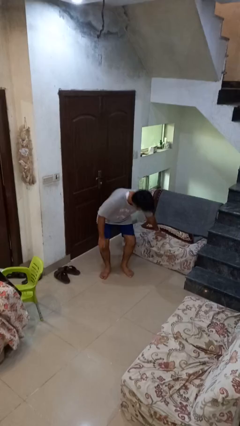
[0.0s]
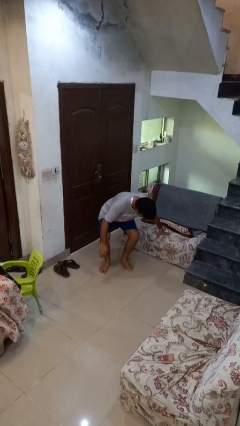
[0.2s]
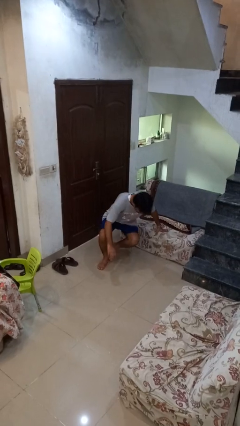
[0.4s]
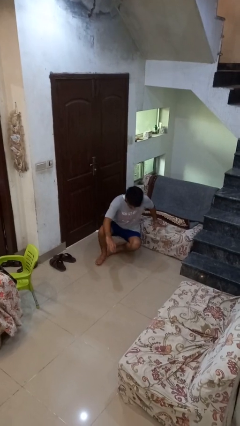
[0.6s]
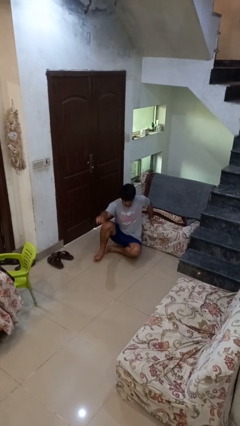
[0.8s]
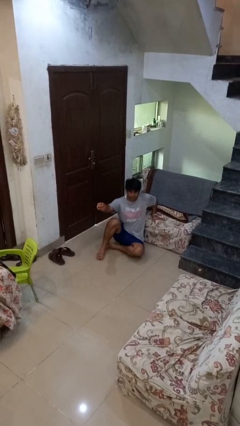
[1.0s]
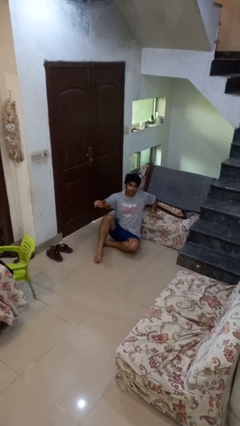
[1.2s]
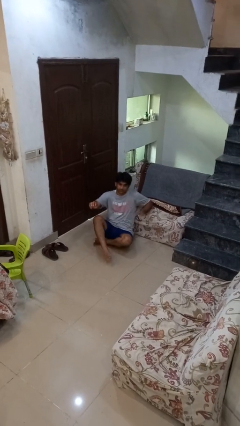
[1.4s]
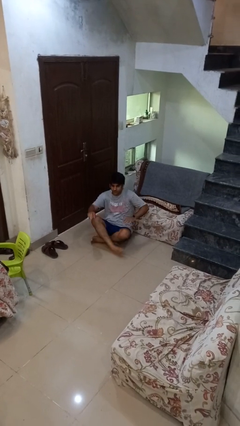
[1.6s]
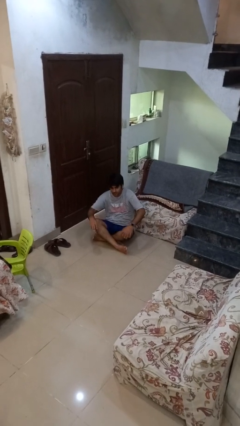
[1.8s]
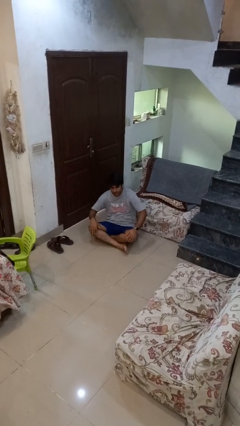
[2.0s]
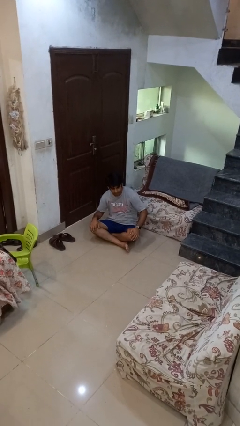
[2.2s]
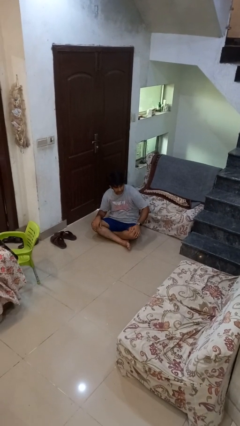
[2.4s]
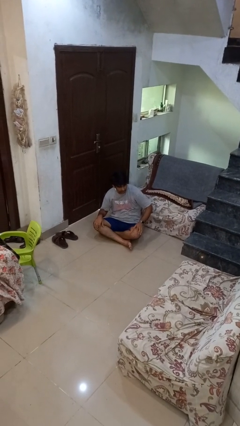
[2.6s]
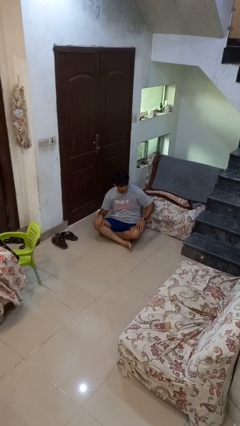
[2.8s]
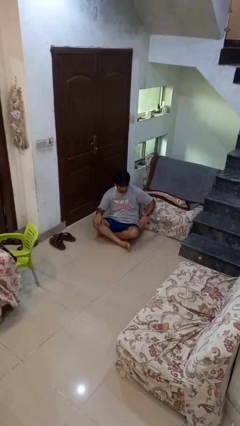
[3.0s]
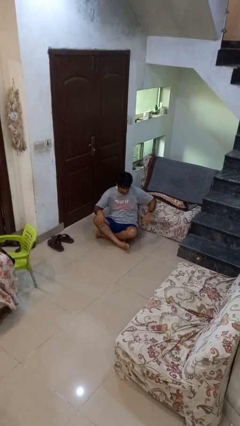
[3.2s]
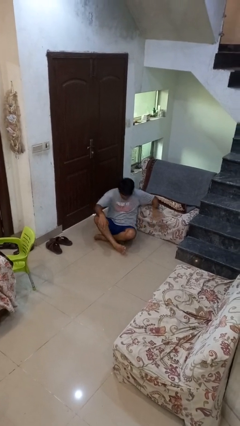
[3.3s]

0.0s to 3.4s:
person sits crisscross

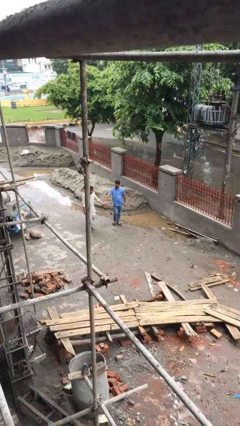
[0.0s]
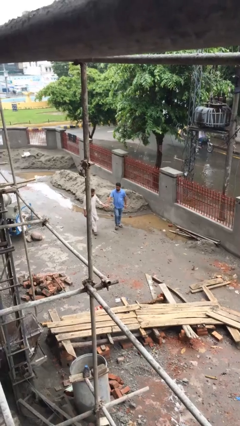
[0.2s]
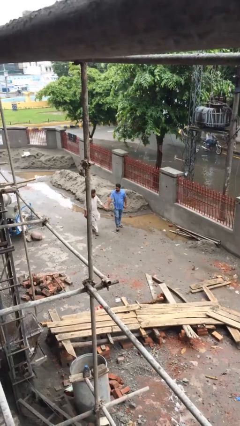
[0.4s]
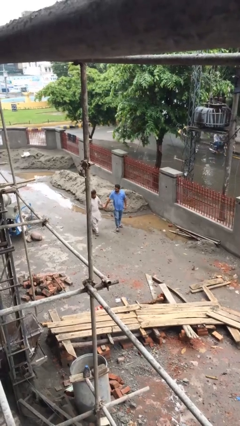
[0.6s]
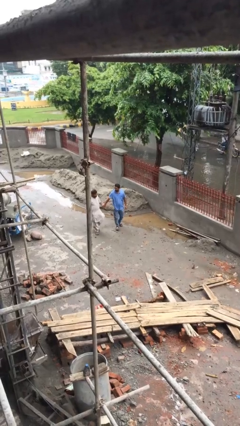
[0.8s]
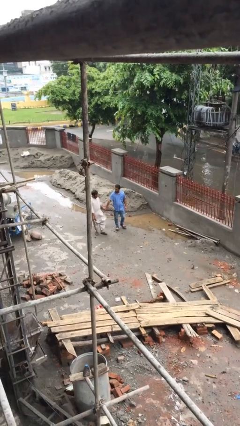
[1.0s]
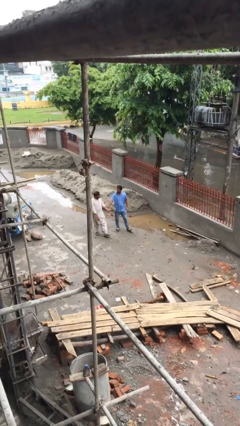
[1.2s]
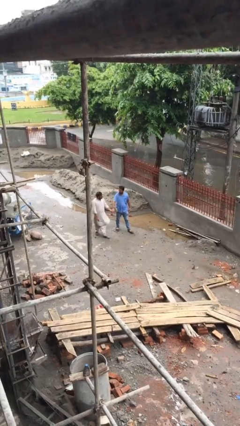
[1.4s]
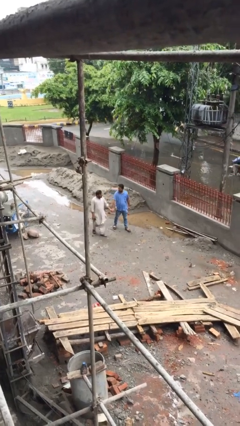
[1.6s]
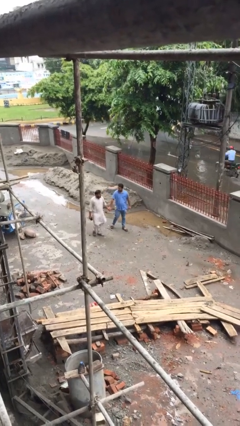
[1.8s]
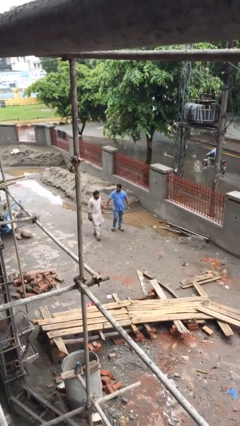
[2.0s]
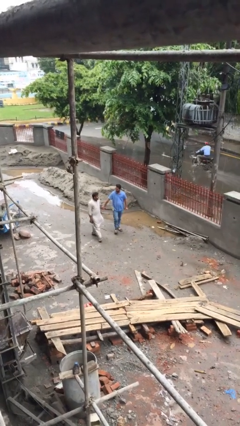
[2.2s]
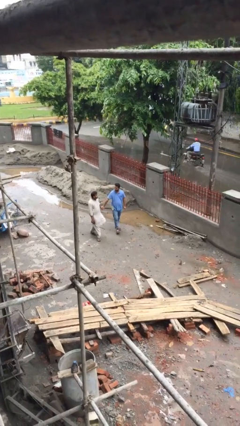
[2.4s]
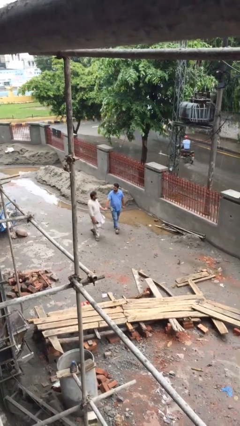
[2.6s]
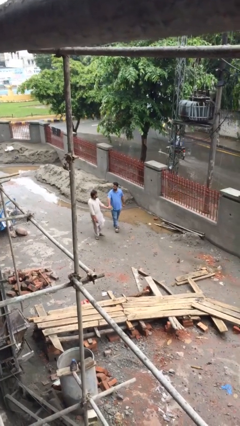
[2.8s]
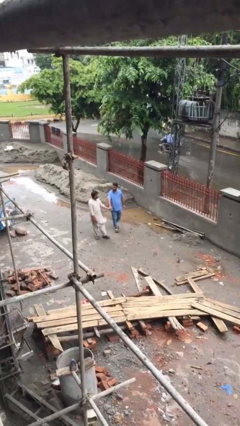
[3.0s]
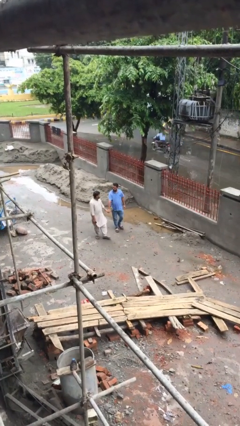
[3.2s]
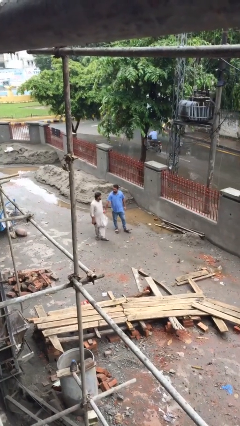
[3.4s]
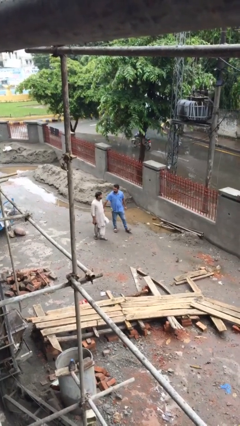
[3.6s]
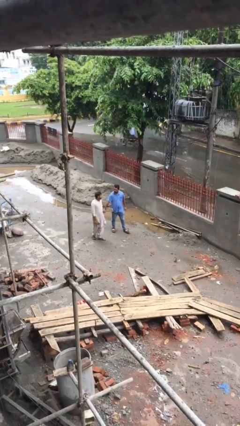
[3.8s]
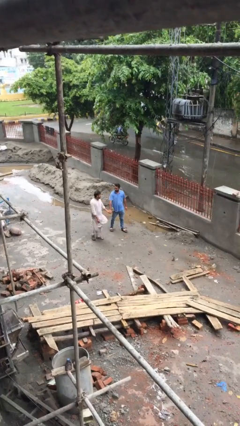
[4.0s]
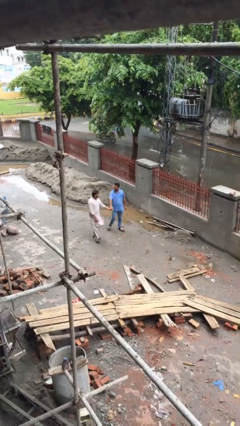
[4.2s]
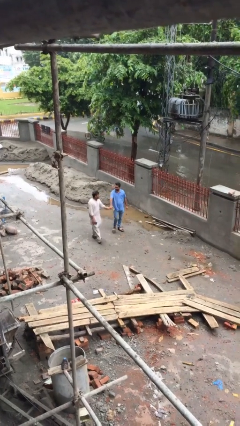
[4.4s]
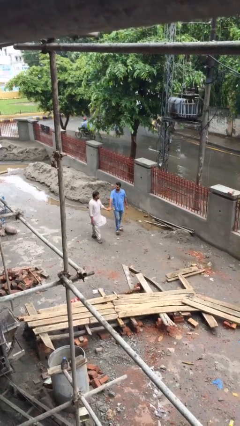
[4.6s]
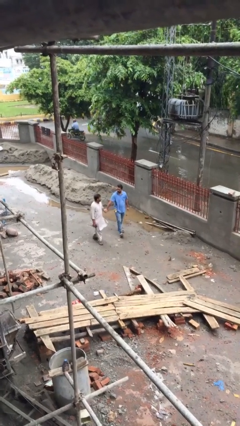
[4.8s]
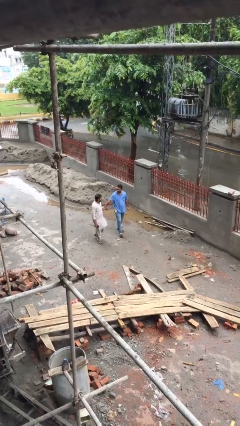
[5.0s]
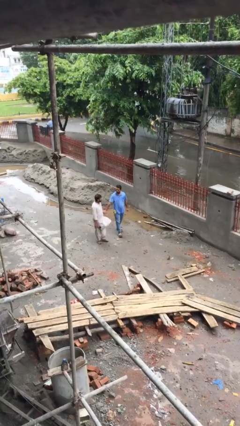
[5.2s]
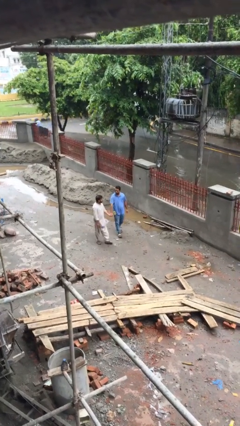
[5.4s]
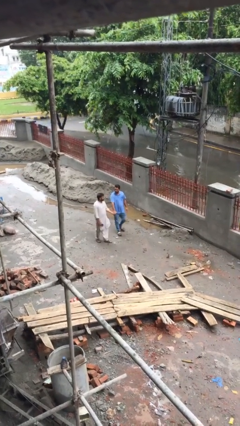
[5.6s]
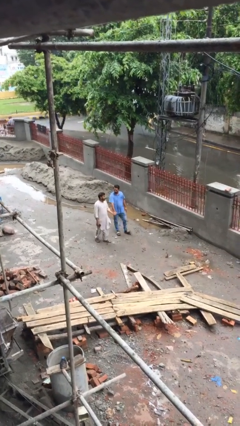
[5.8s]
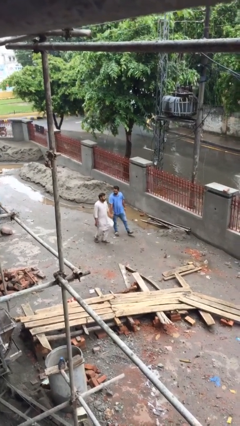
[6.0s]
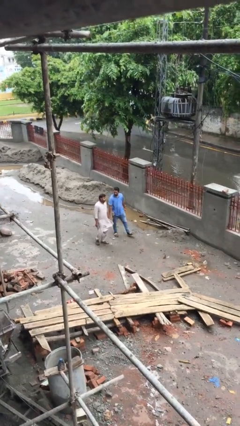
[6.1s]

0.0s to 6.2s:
person holds hand

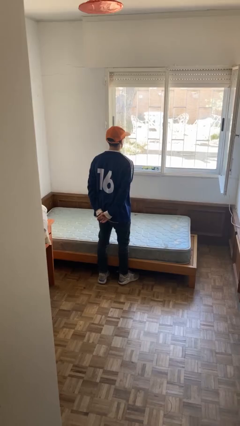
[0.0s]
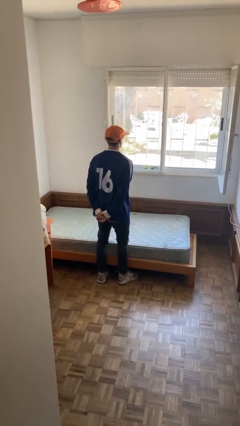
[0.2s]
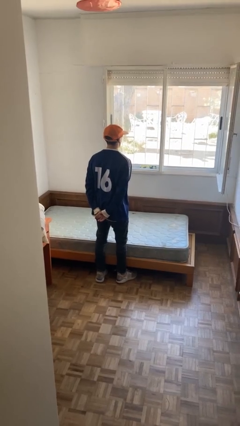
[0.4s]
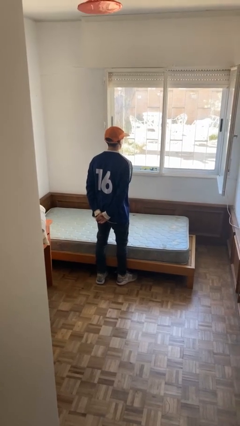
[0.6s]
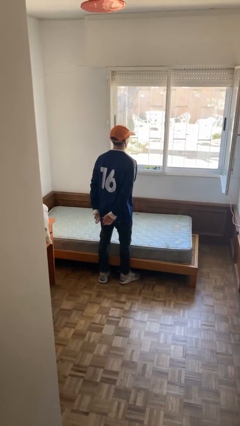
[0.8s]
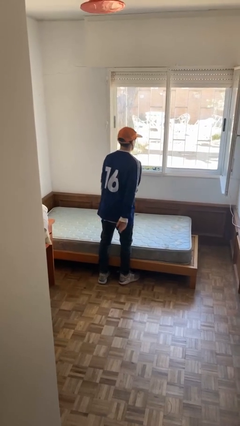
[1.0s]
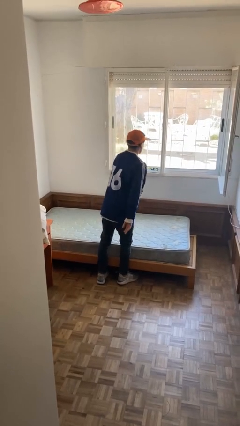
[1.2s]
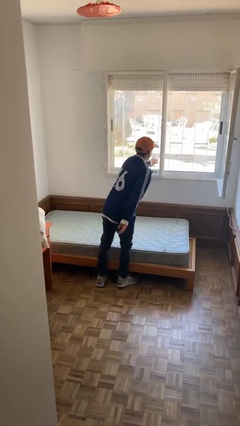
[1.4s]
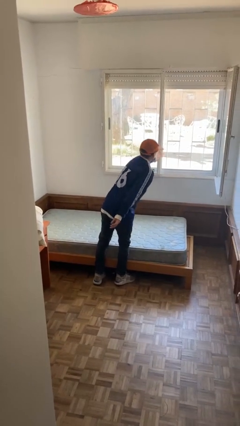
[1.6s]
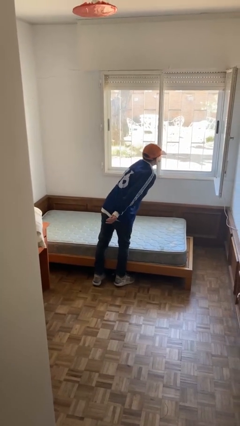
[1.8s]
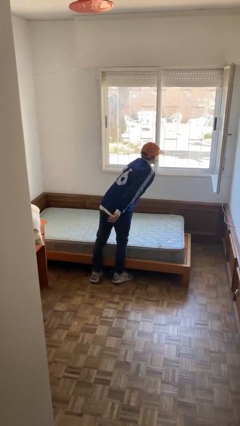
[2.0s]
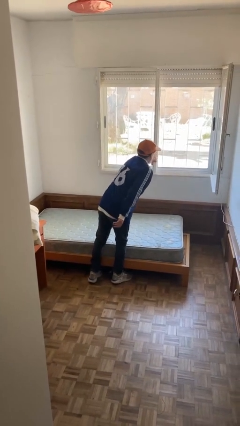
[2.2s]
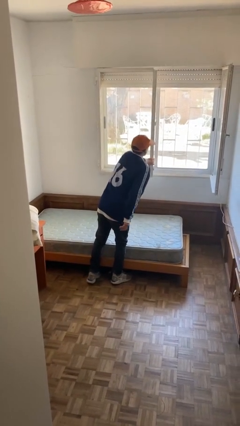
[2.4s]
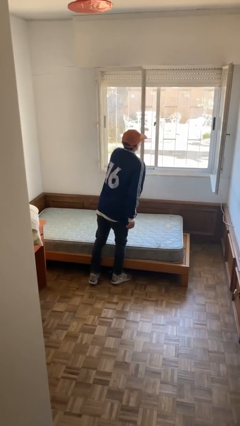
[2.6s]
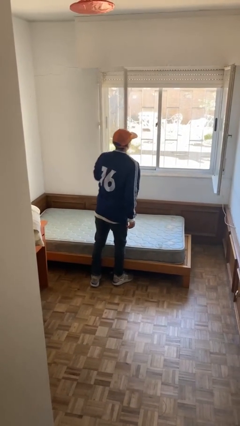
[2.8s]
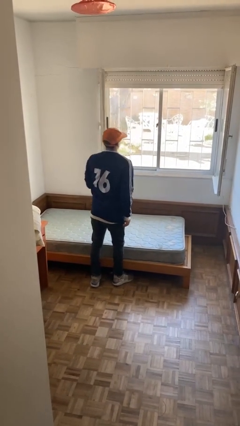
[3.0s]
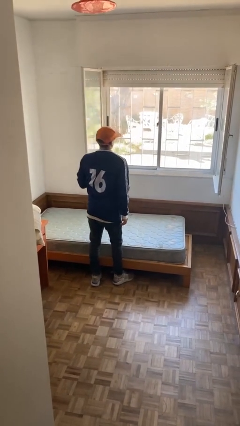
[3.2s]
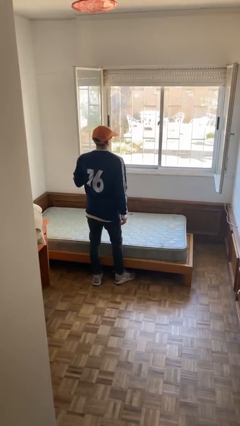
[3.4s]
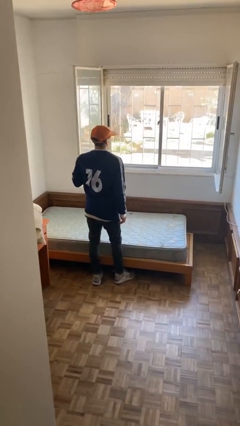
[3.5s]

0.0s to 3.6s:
person opens home window

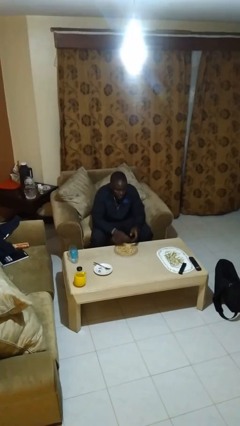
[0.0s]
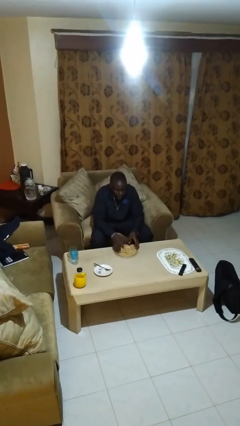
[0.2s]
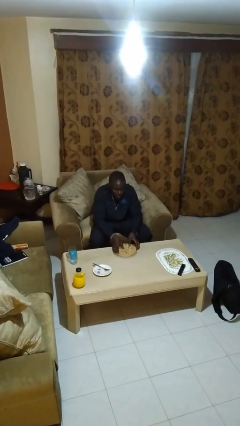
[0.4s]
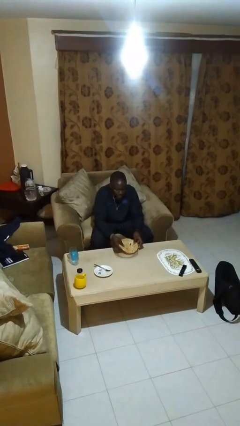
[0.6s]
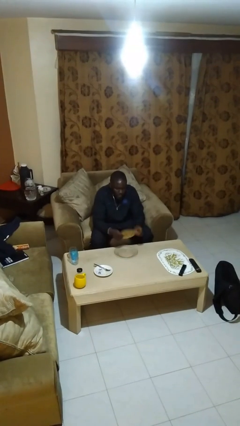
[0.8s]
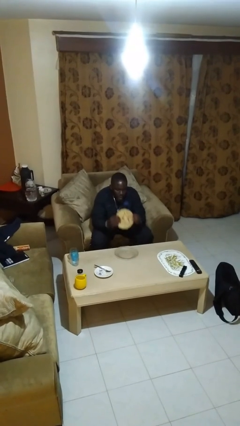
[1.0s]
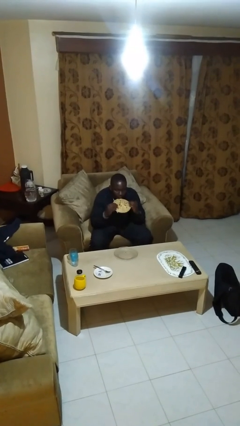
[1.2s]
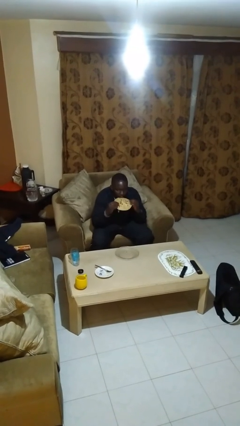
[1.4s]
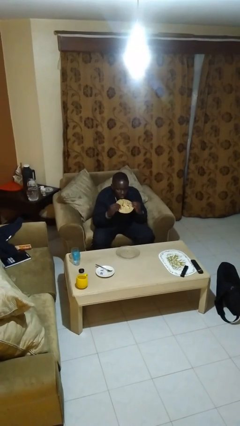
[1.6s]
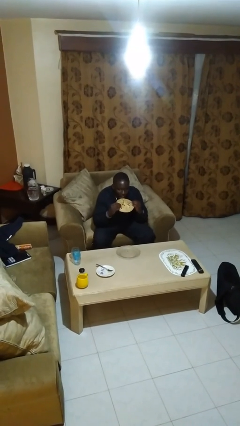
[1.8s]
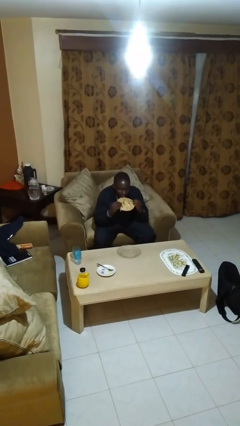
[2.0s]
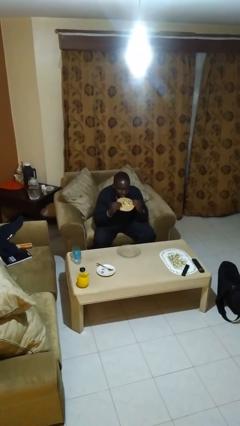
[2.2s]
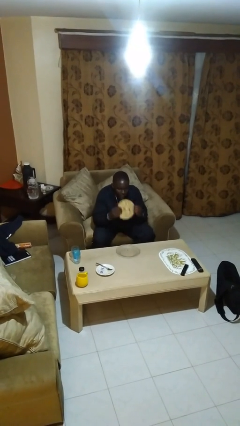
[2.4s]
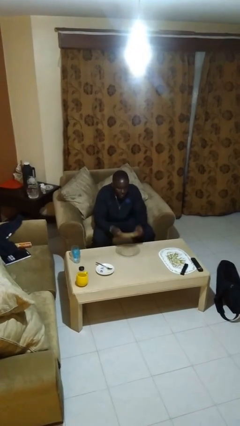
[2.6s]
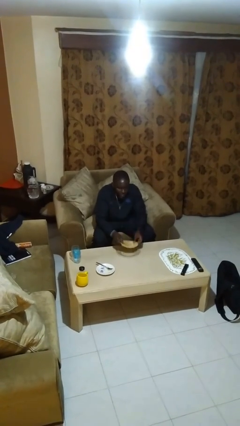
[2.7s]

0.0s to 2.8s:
person eats with hands

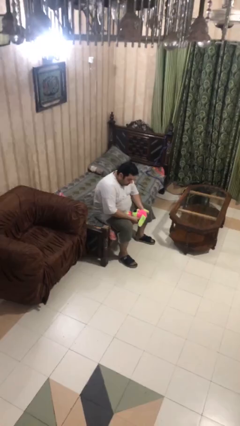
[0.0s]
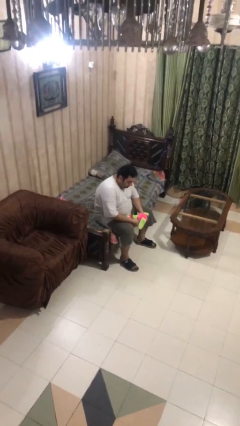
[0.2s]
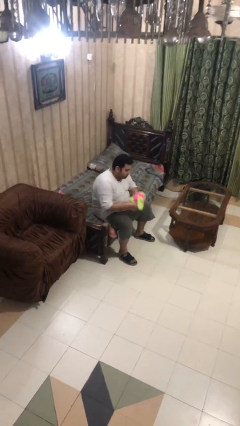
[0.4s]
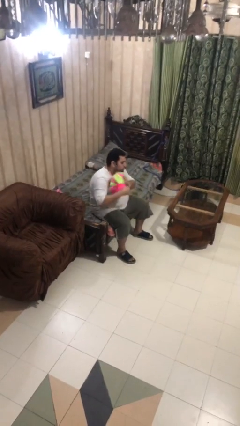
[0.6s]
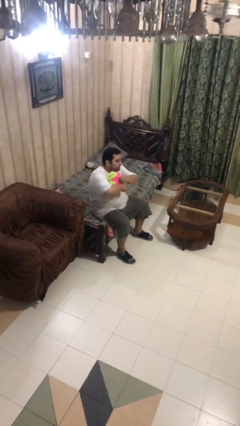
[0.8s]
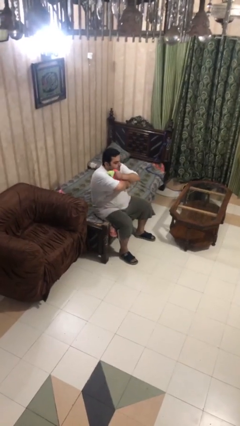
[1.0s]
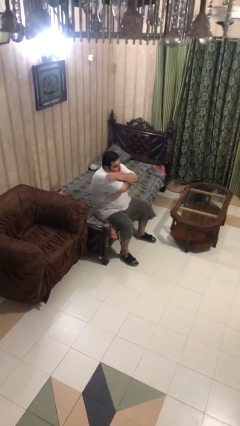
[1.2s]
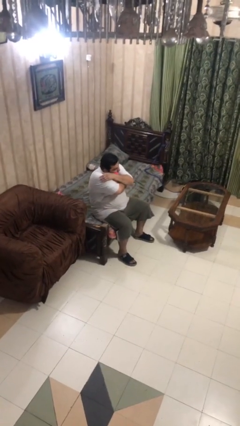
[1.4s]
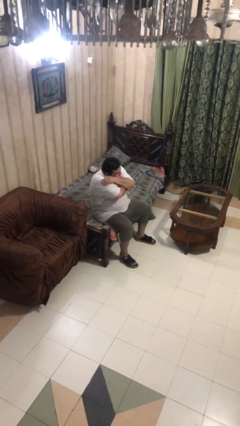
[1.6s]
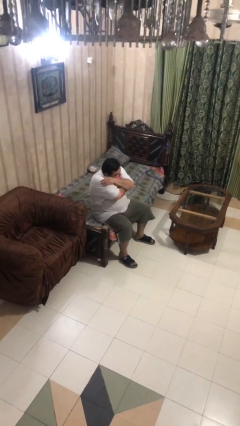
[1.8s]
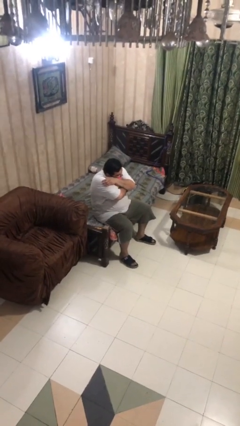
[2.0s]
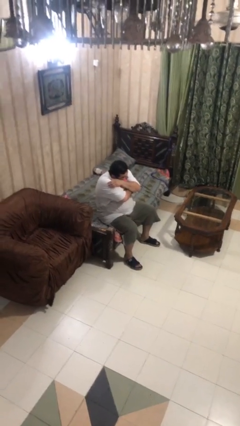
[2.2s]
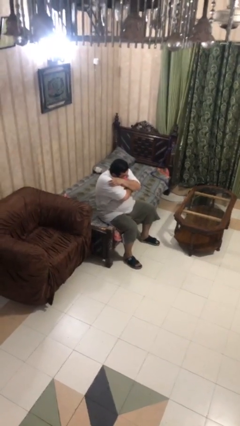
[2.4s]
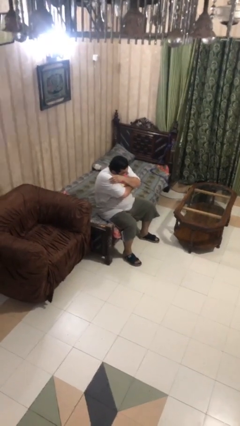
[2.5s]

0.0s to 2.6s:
person hugs stuffed animal
